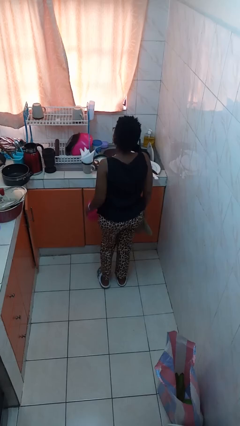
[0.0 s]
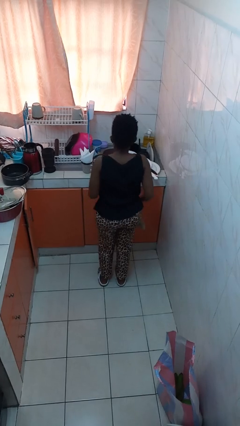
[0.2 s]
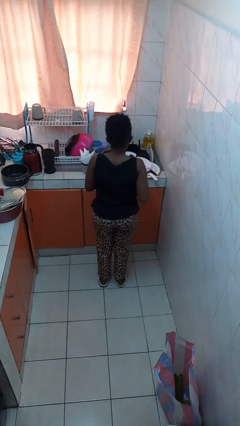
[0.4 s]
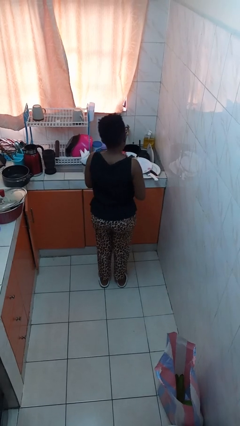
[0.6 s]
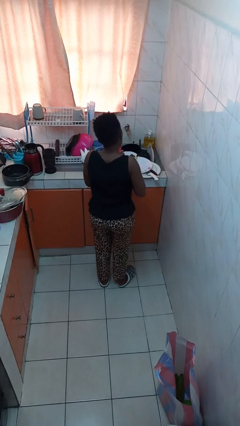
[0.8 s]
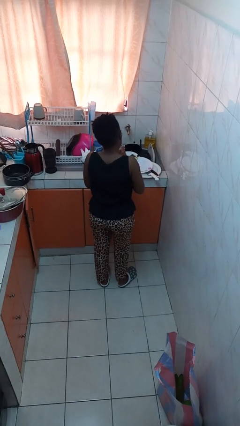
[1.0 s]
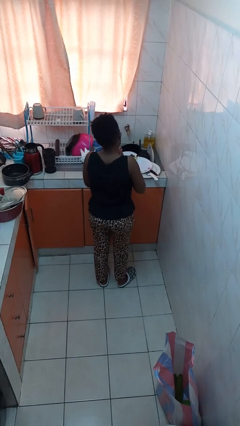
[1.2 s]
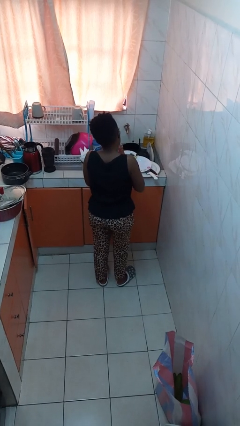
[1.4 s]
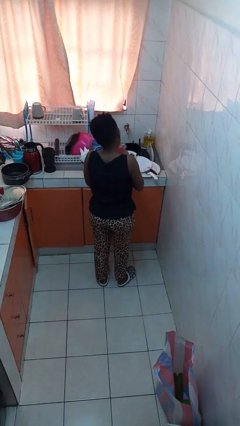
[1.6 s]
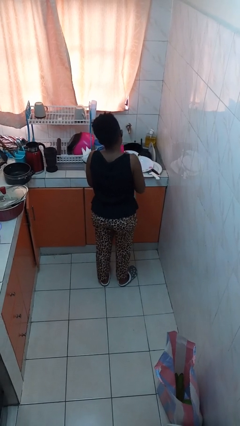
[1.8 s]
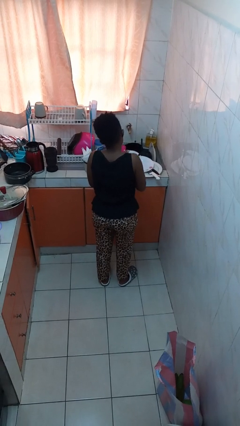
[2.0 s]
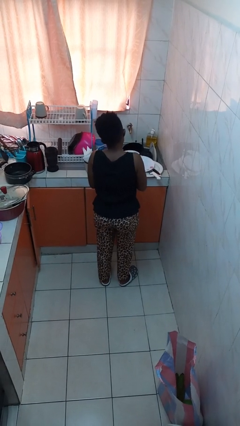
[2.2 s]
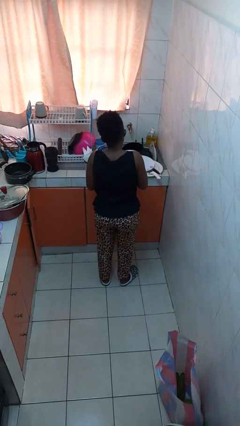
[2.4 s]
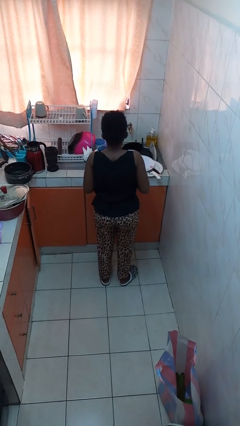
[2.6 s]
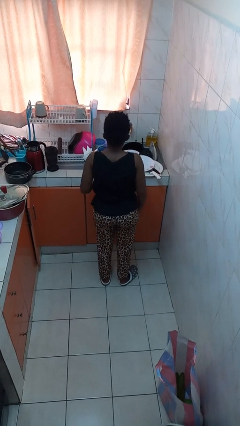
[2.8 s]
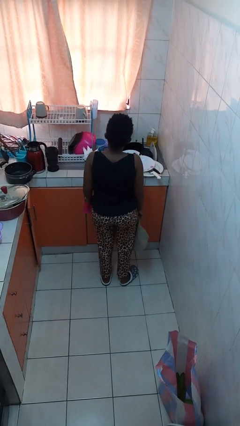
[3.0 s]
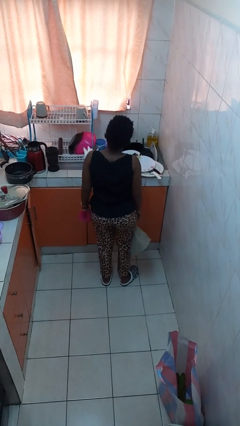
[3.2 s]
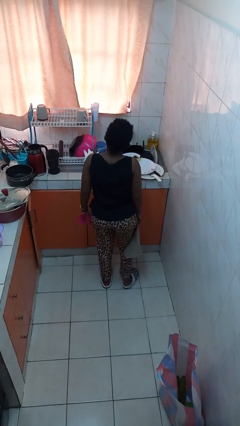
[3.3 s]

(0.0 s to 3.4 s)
person dries dish

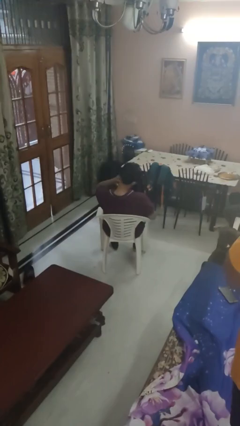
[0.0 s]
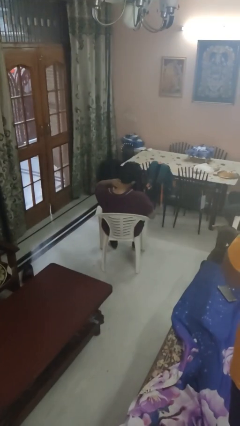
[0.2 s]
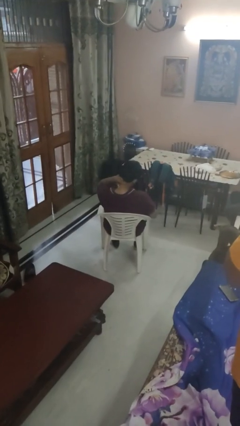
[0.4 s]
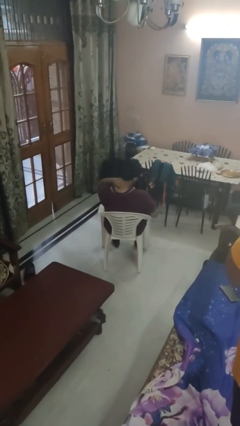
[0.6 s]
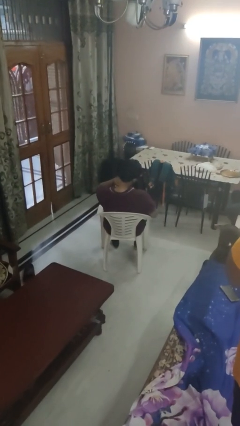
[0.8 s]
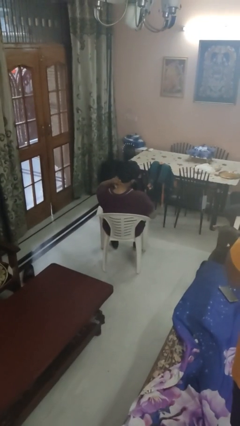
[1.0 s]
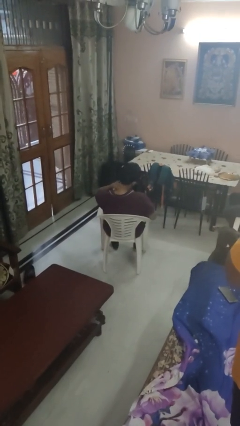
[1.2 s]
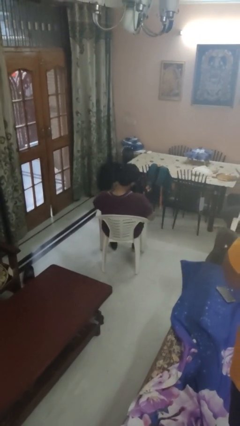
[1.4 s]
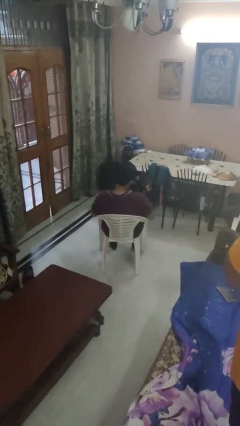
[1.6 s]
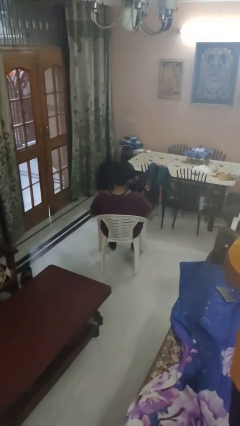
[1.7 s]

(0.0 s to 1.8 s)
person rubs neck

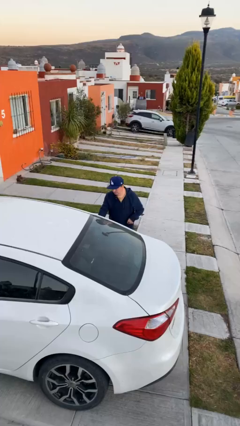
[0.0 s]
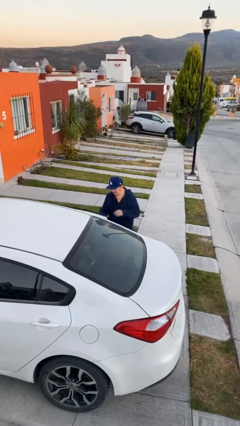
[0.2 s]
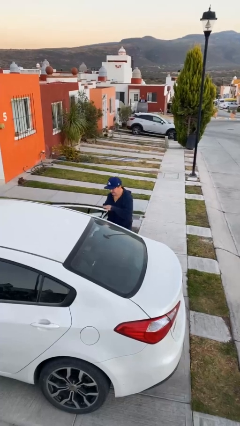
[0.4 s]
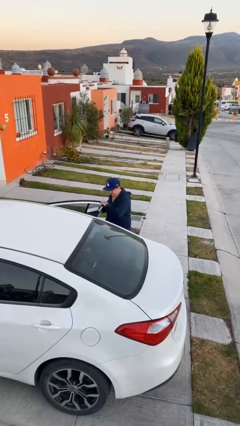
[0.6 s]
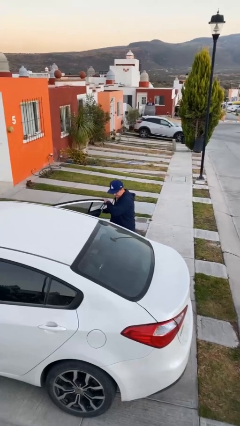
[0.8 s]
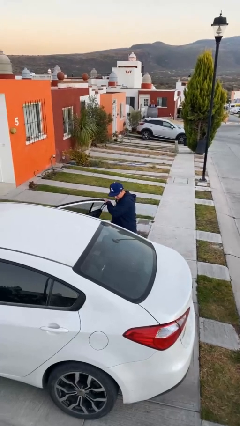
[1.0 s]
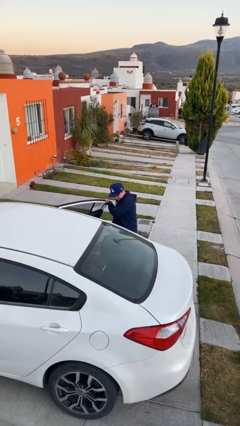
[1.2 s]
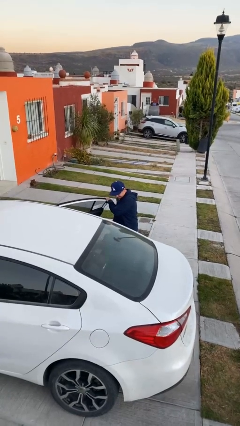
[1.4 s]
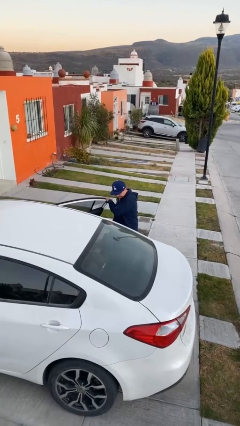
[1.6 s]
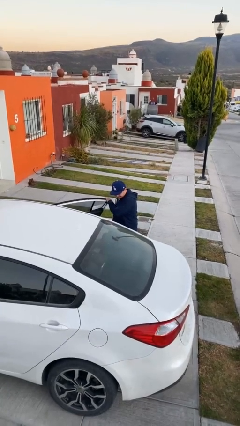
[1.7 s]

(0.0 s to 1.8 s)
person opens car door

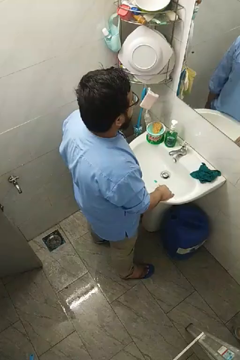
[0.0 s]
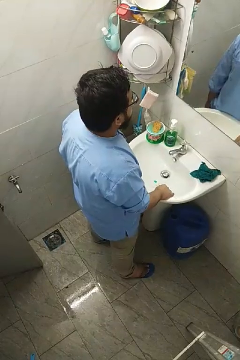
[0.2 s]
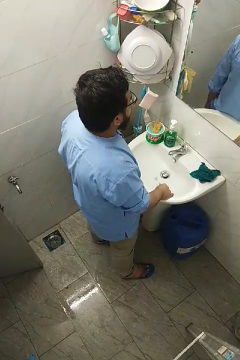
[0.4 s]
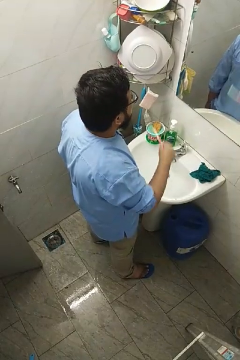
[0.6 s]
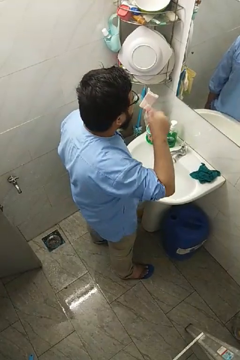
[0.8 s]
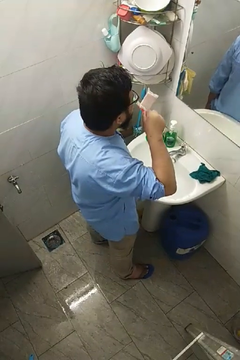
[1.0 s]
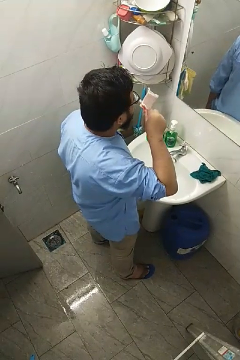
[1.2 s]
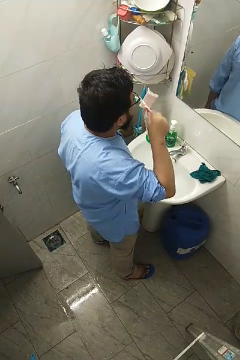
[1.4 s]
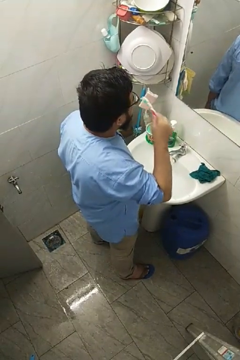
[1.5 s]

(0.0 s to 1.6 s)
person brushes teeth

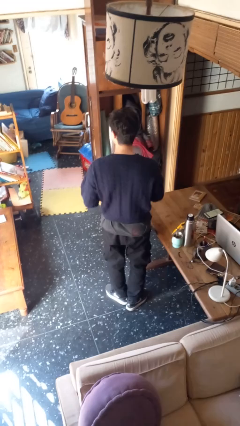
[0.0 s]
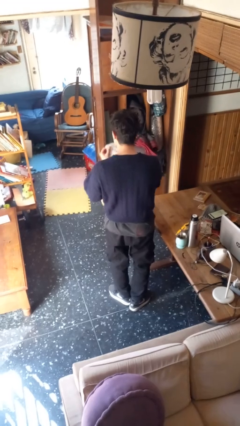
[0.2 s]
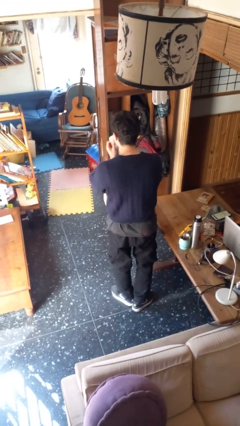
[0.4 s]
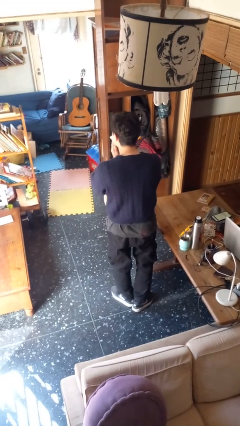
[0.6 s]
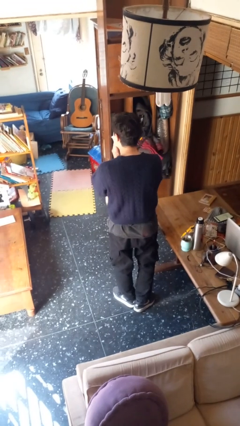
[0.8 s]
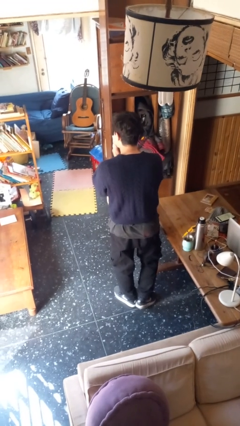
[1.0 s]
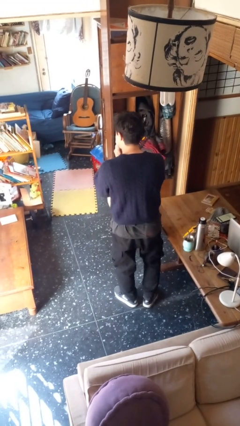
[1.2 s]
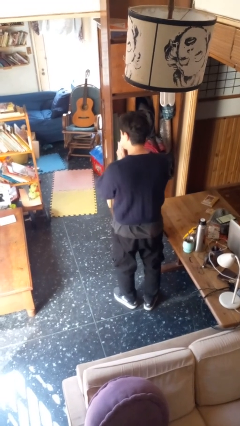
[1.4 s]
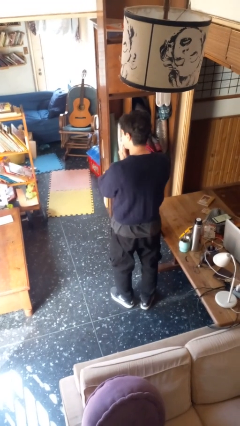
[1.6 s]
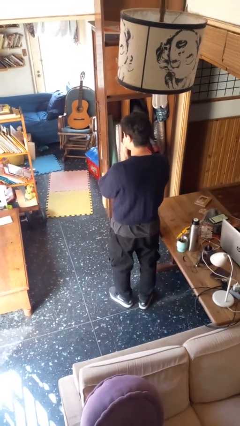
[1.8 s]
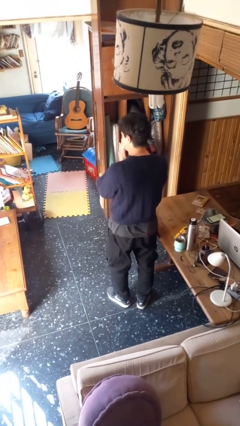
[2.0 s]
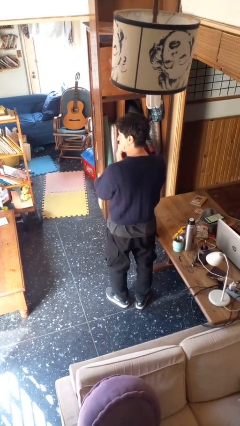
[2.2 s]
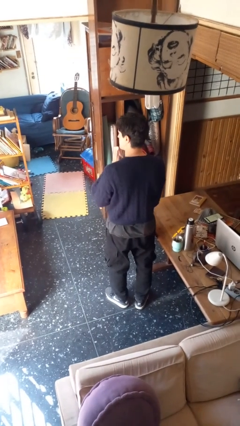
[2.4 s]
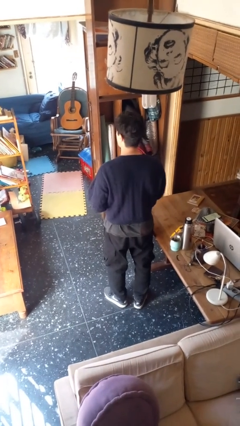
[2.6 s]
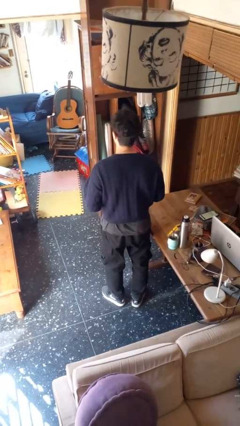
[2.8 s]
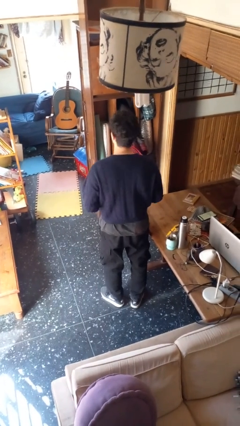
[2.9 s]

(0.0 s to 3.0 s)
person wipes mouth with napkin

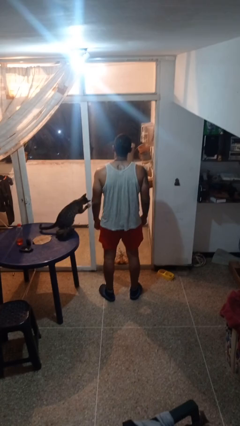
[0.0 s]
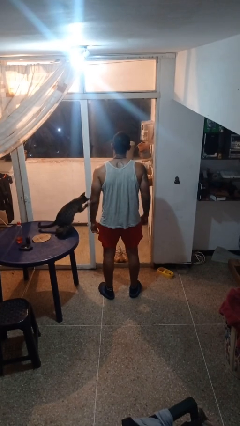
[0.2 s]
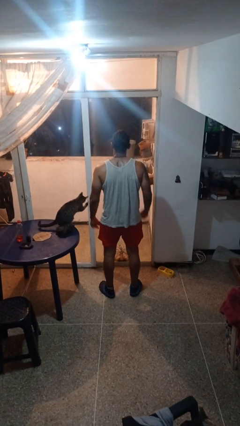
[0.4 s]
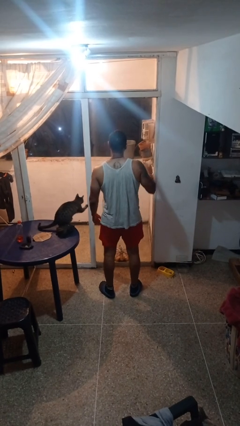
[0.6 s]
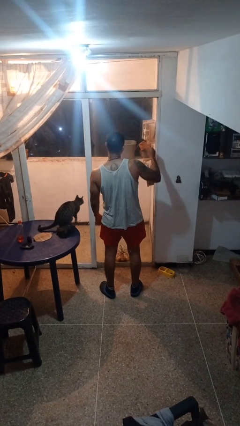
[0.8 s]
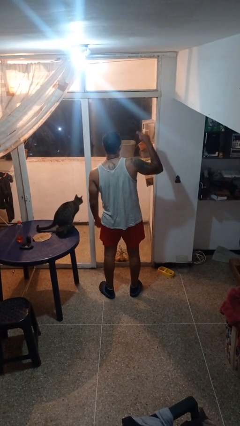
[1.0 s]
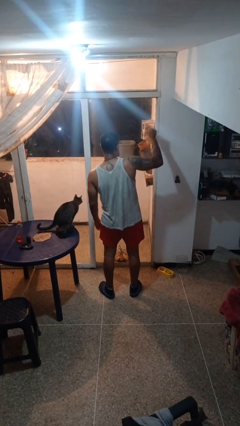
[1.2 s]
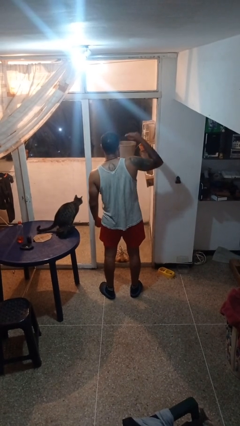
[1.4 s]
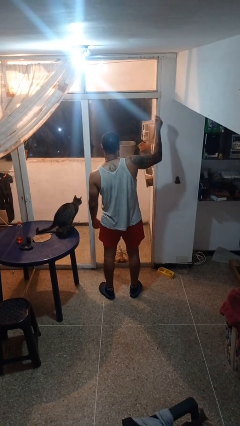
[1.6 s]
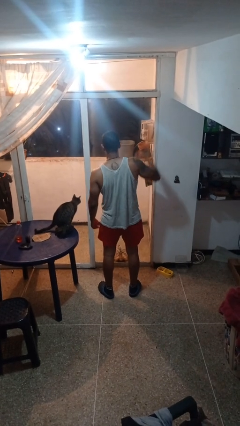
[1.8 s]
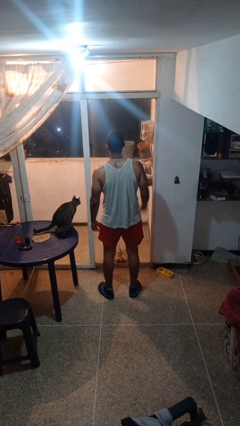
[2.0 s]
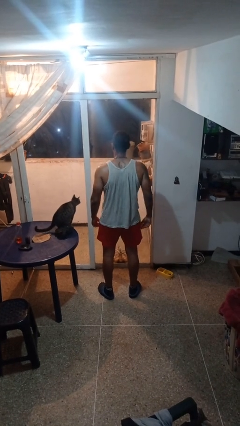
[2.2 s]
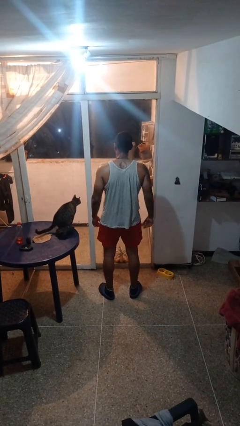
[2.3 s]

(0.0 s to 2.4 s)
person snaps fingers

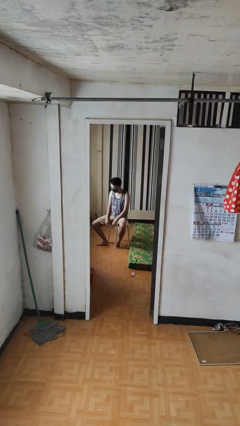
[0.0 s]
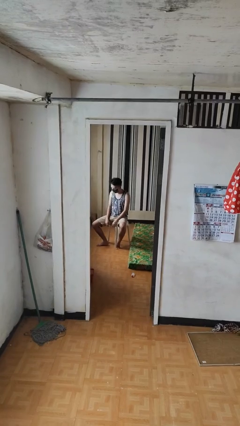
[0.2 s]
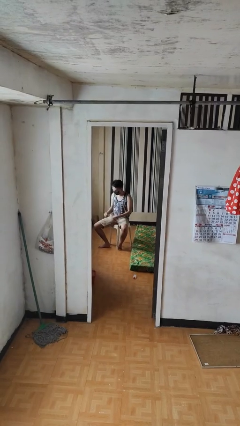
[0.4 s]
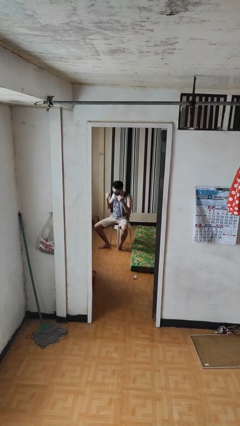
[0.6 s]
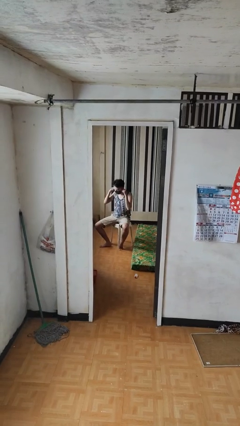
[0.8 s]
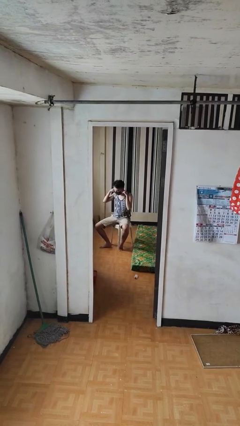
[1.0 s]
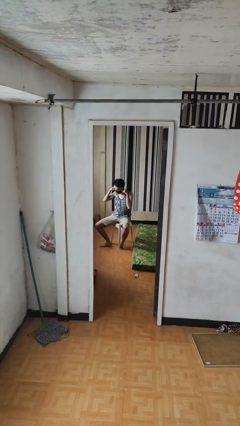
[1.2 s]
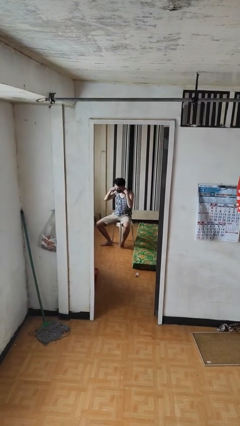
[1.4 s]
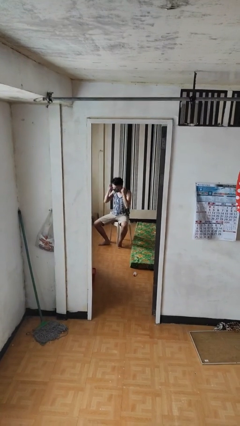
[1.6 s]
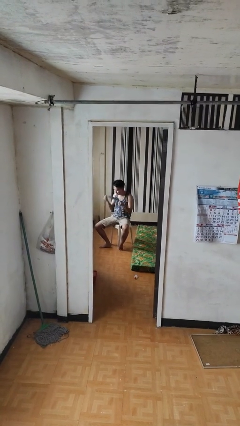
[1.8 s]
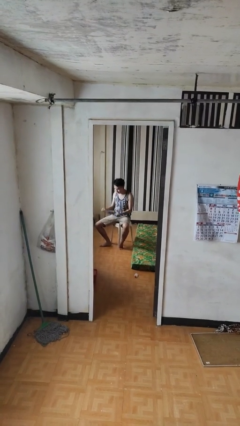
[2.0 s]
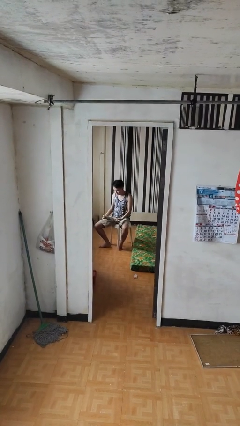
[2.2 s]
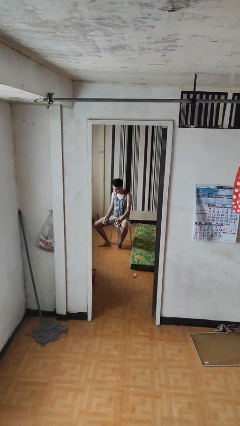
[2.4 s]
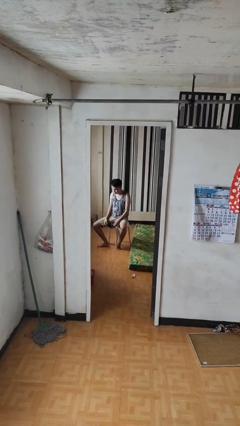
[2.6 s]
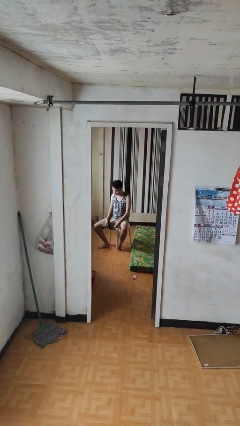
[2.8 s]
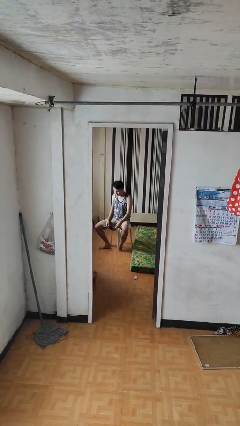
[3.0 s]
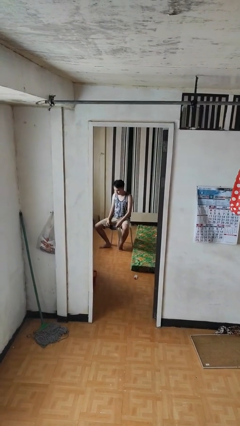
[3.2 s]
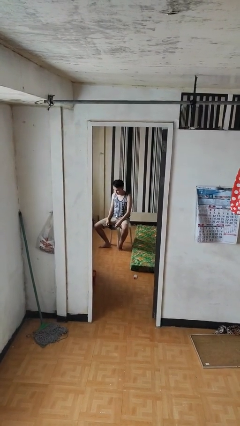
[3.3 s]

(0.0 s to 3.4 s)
person takes off facemask
